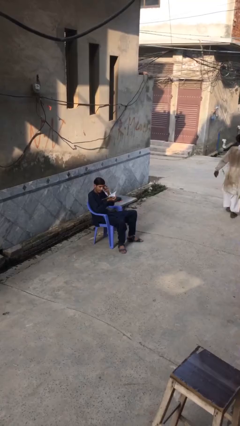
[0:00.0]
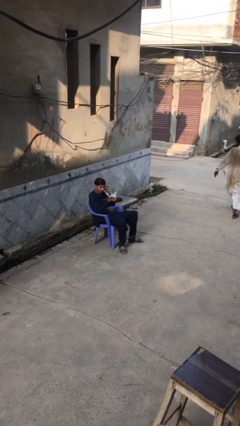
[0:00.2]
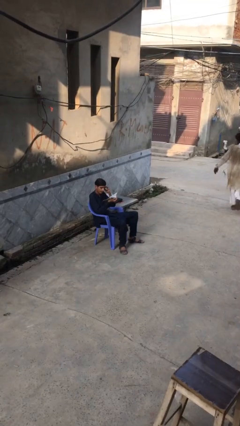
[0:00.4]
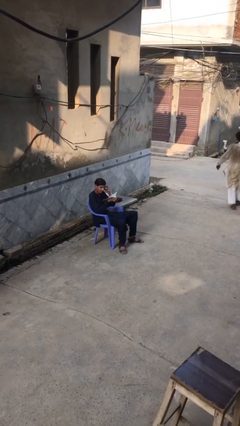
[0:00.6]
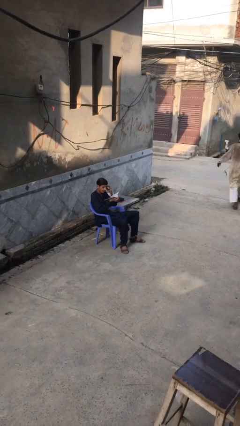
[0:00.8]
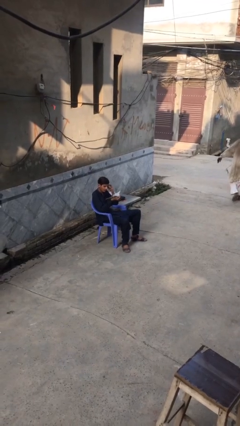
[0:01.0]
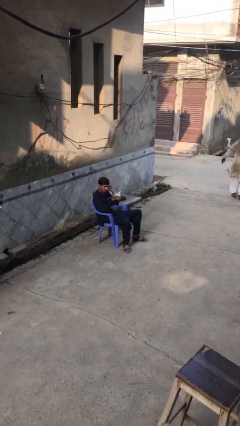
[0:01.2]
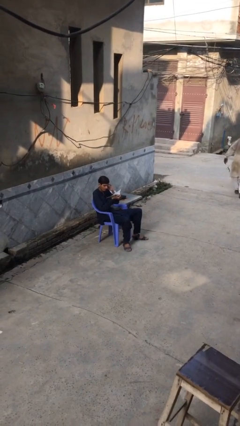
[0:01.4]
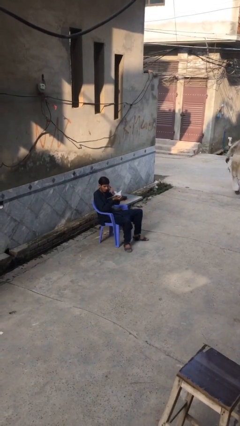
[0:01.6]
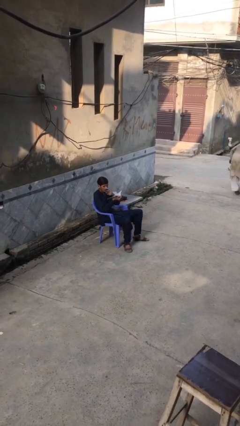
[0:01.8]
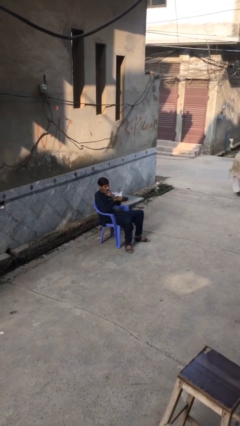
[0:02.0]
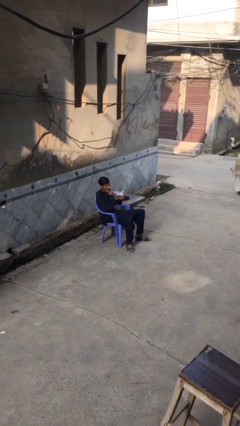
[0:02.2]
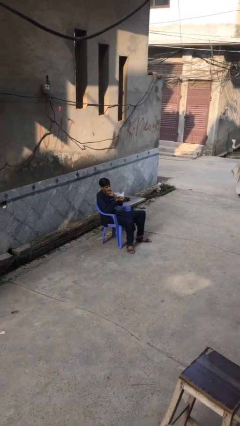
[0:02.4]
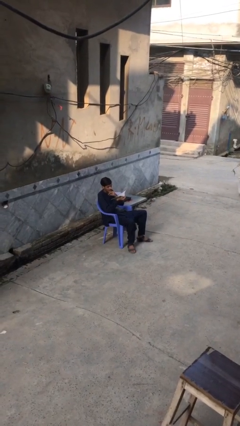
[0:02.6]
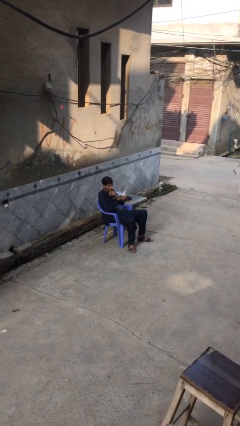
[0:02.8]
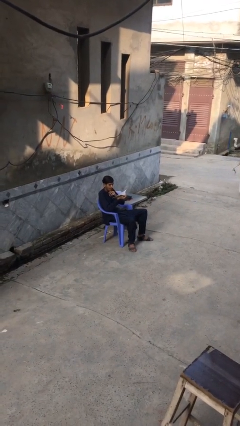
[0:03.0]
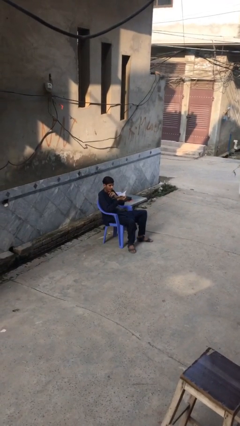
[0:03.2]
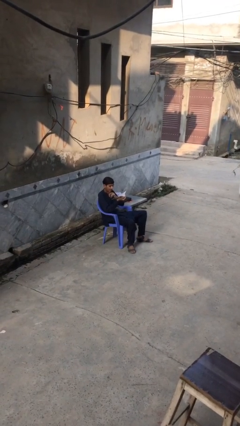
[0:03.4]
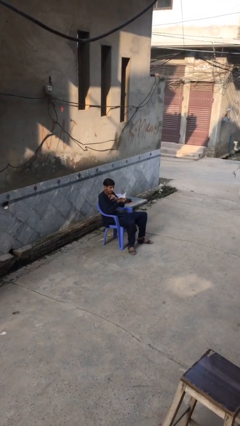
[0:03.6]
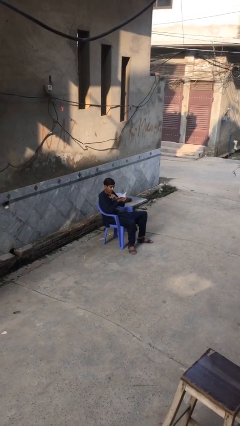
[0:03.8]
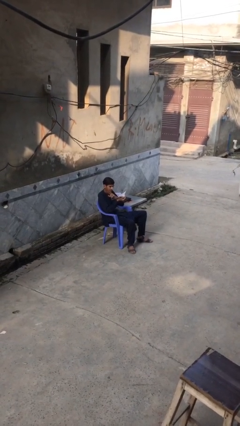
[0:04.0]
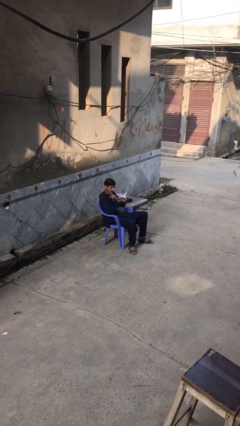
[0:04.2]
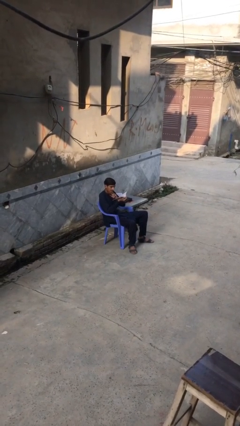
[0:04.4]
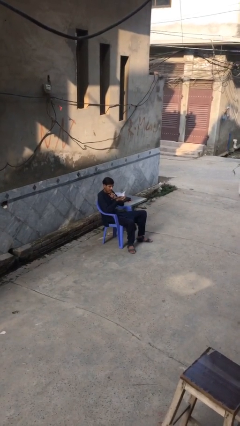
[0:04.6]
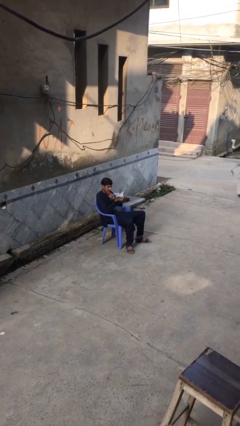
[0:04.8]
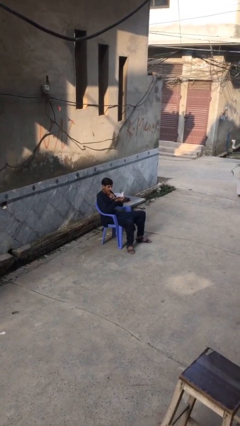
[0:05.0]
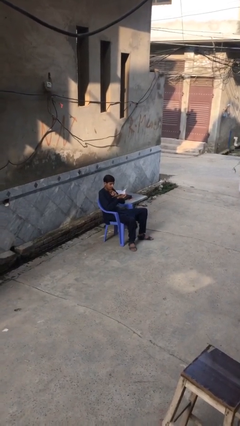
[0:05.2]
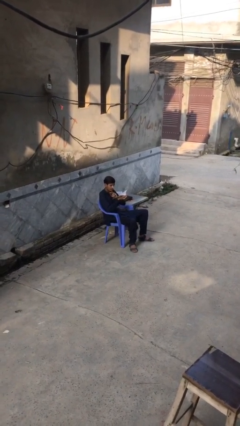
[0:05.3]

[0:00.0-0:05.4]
person reads document

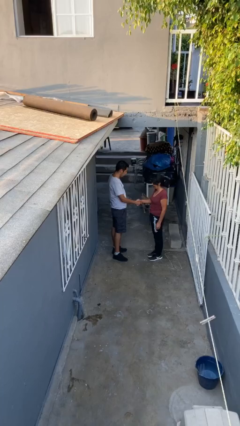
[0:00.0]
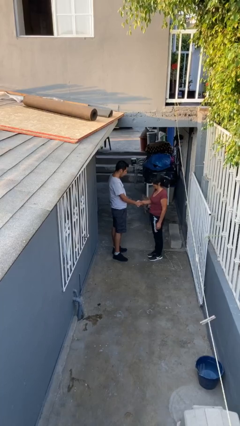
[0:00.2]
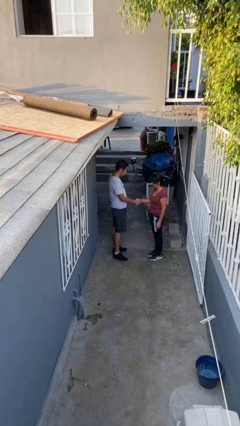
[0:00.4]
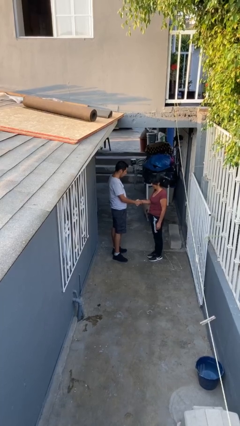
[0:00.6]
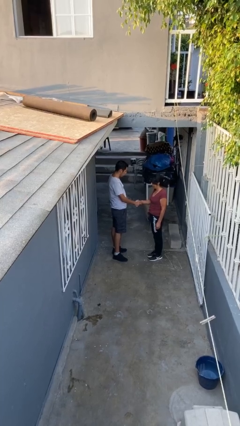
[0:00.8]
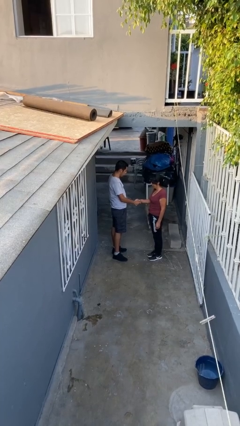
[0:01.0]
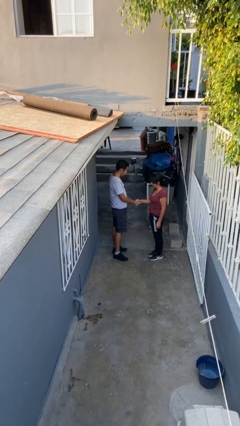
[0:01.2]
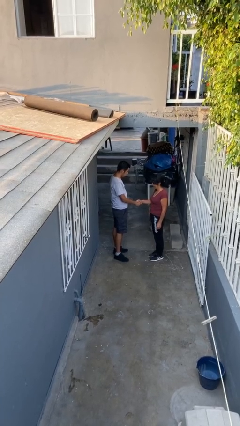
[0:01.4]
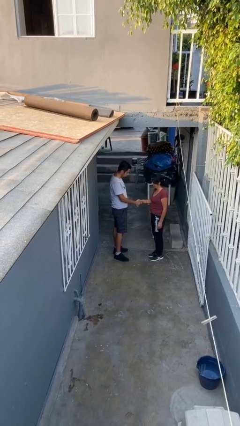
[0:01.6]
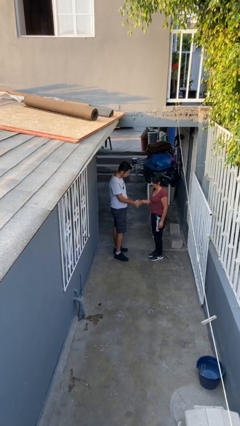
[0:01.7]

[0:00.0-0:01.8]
person shakes hand

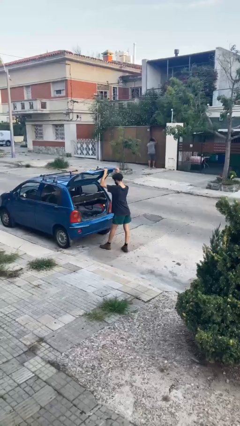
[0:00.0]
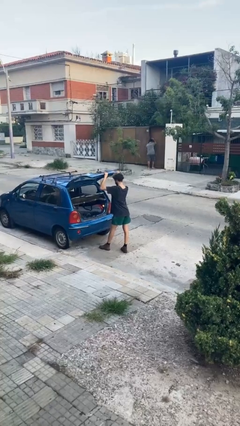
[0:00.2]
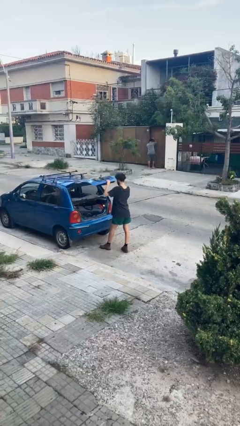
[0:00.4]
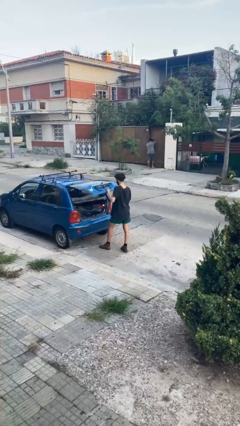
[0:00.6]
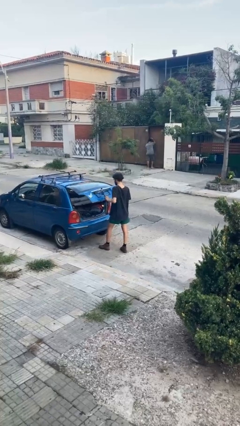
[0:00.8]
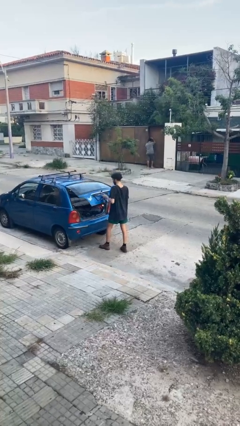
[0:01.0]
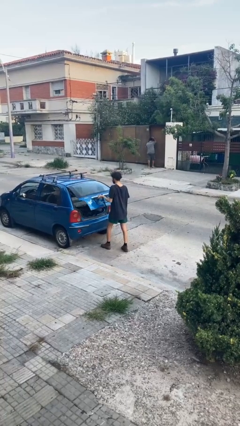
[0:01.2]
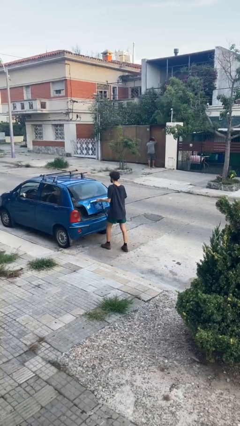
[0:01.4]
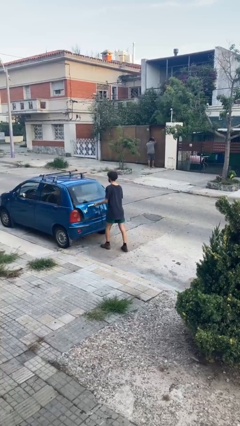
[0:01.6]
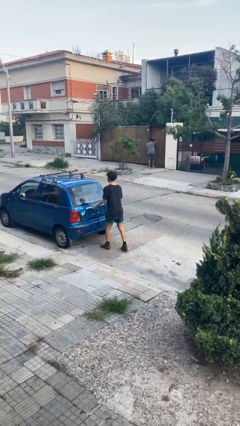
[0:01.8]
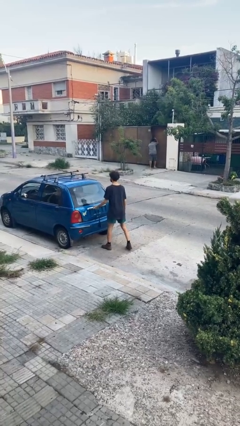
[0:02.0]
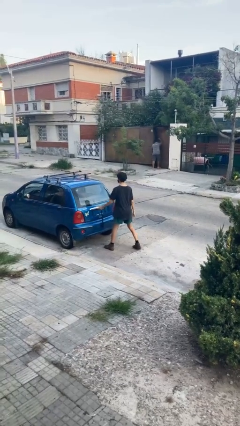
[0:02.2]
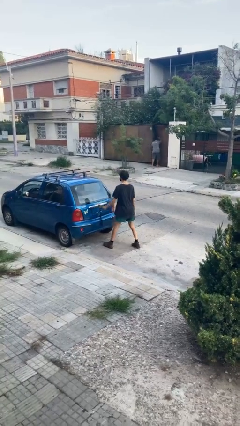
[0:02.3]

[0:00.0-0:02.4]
person closes car trunk

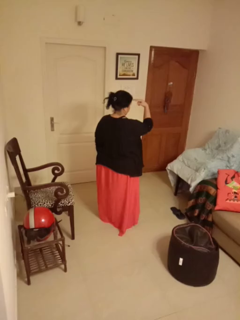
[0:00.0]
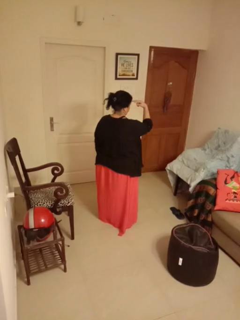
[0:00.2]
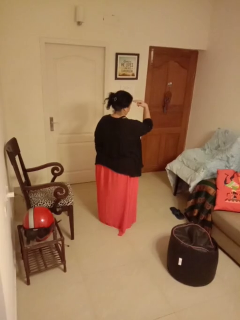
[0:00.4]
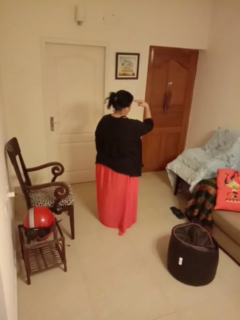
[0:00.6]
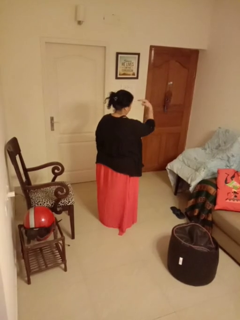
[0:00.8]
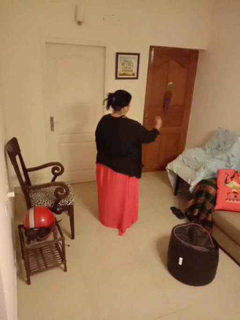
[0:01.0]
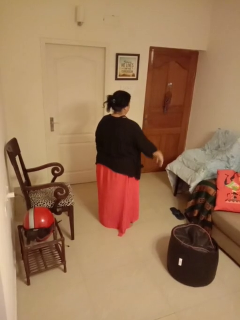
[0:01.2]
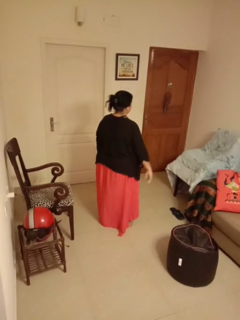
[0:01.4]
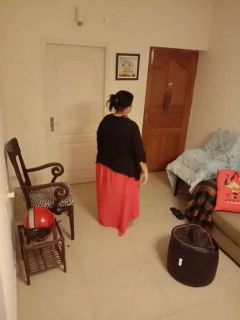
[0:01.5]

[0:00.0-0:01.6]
person gestures watch closely

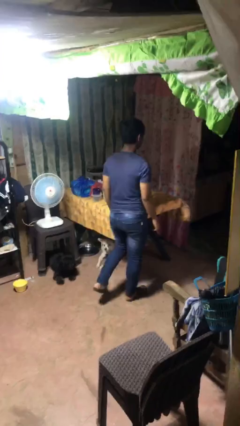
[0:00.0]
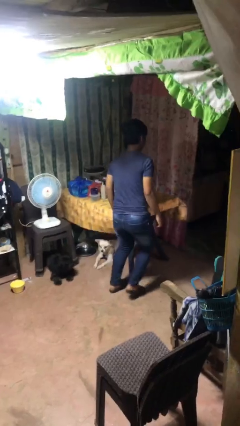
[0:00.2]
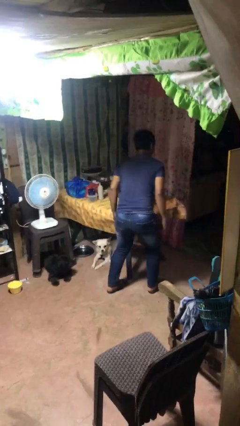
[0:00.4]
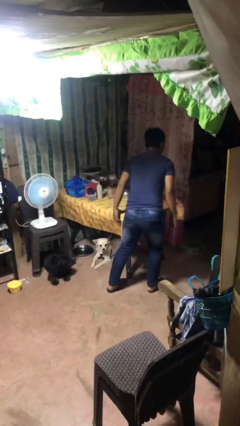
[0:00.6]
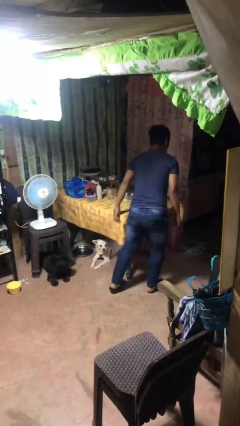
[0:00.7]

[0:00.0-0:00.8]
person bumps into table

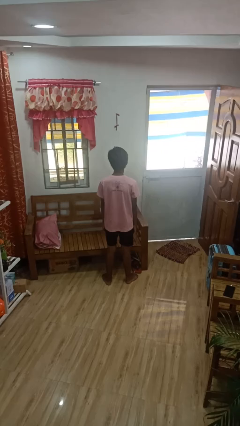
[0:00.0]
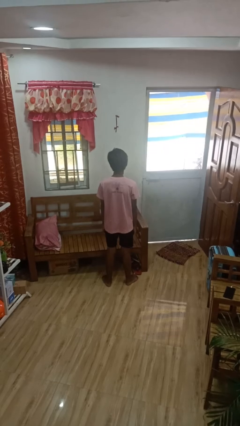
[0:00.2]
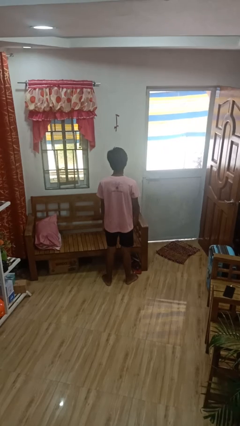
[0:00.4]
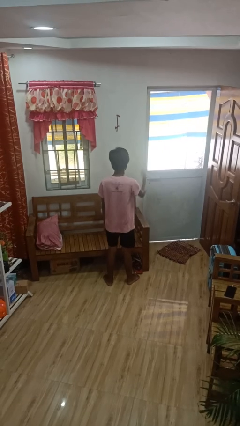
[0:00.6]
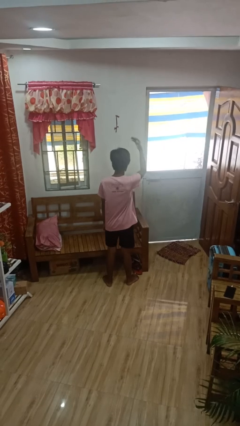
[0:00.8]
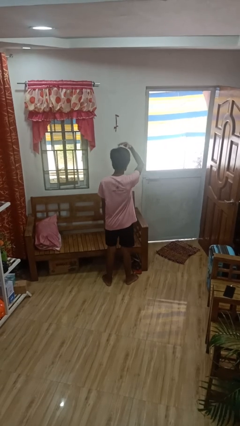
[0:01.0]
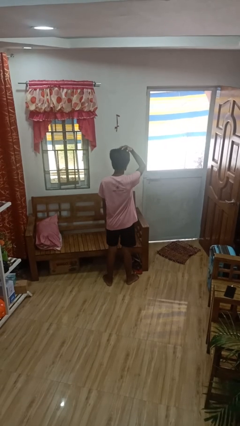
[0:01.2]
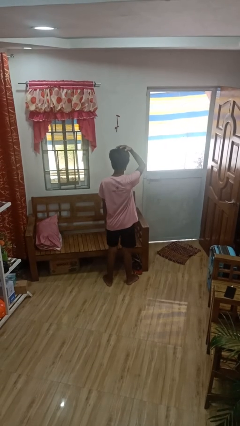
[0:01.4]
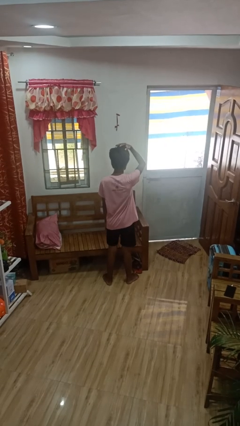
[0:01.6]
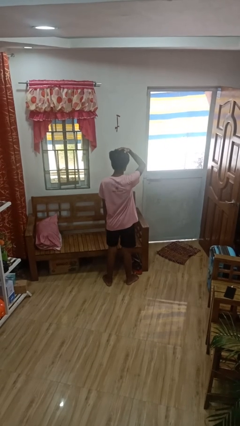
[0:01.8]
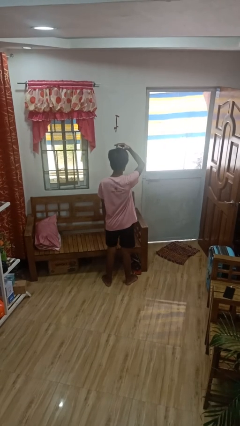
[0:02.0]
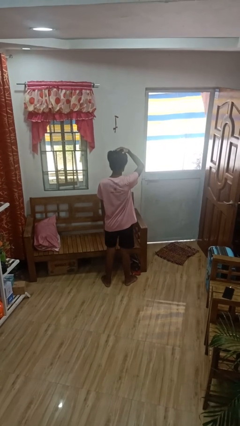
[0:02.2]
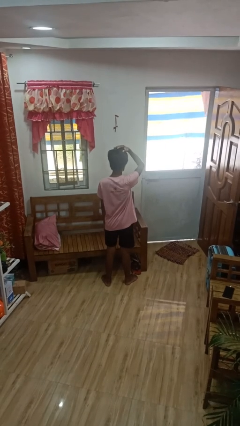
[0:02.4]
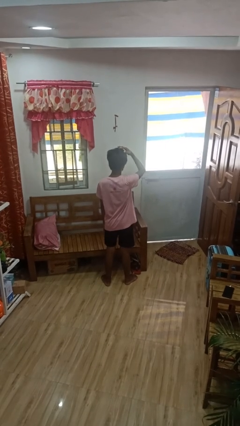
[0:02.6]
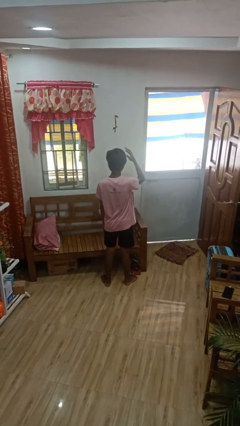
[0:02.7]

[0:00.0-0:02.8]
person pats head

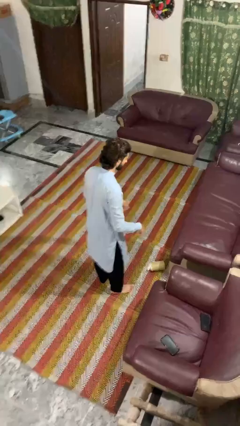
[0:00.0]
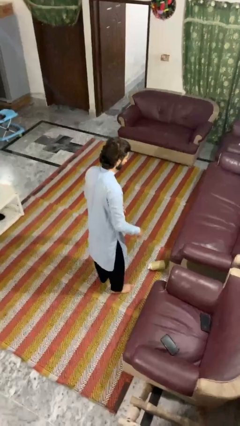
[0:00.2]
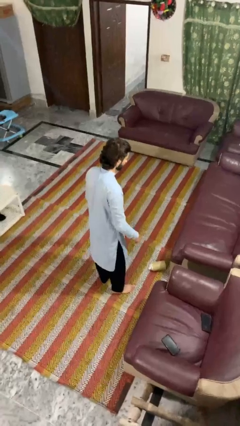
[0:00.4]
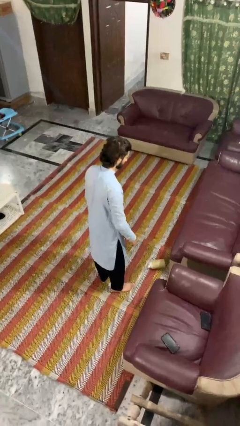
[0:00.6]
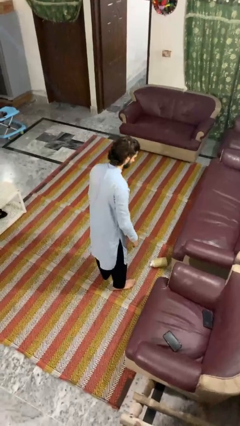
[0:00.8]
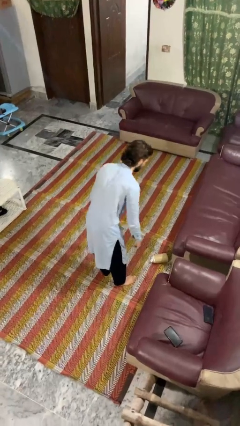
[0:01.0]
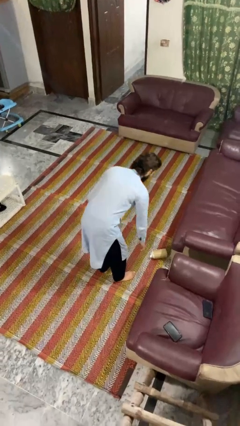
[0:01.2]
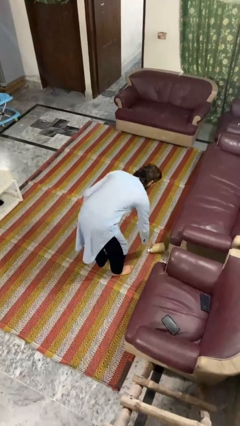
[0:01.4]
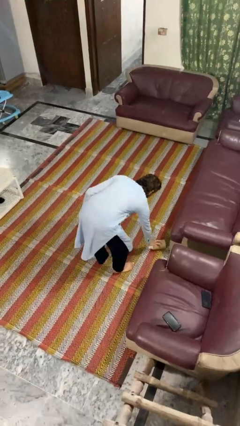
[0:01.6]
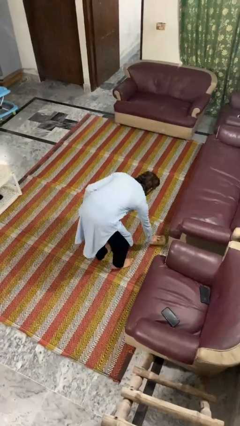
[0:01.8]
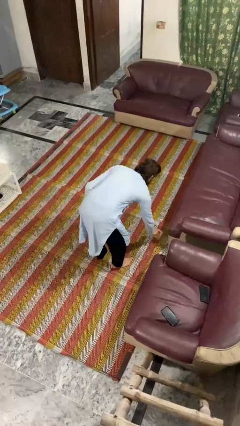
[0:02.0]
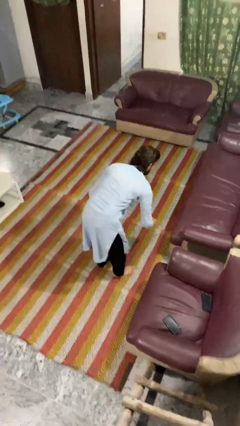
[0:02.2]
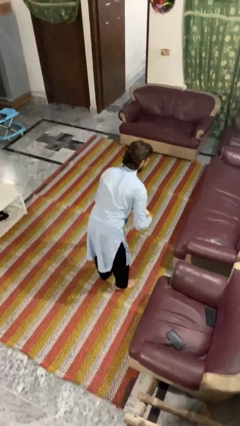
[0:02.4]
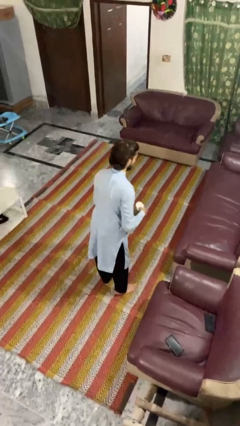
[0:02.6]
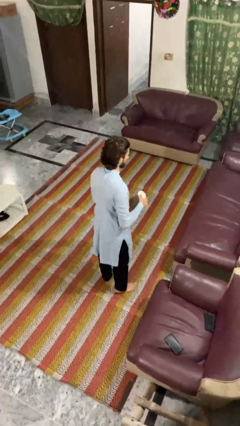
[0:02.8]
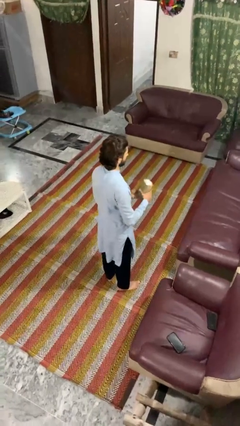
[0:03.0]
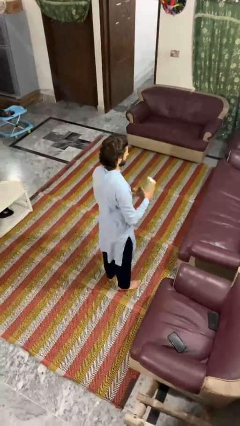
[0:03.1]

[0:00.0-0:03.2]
person picks up object from floor
